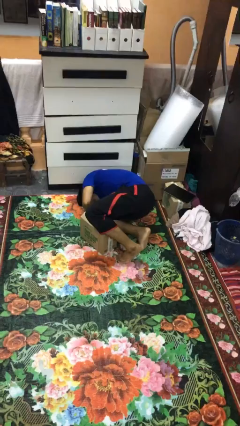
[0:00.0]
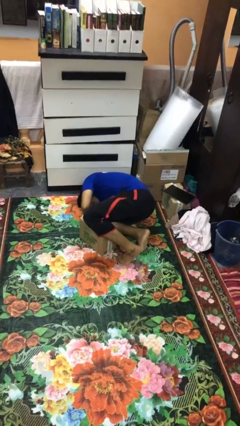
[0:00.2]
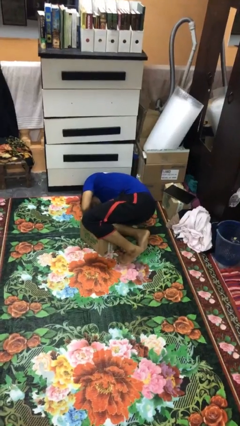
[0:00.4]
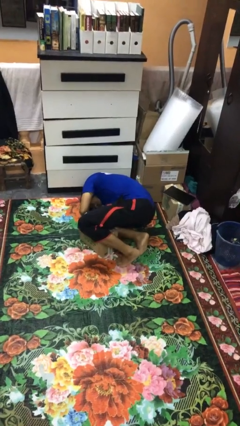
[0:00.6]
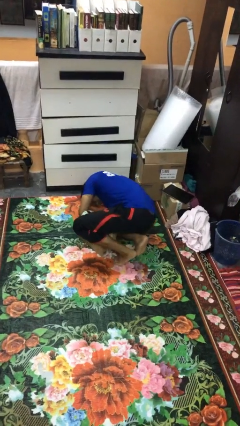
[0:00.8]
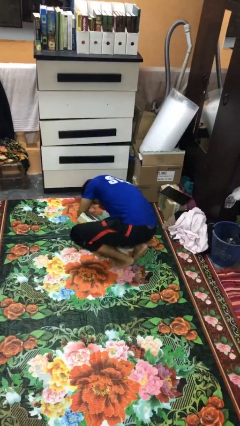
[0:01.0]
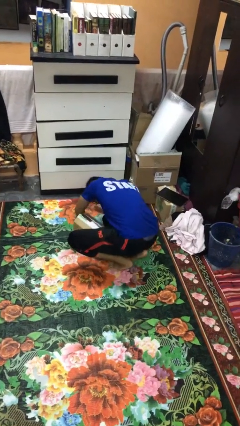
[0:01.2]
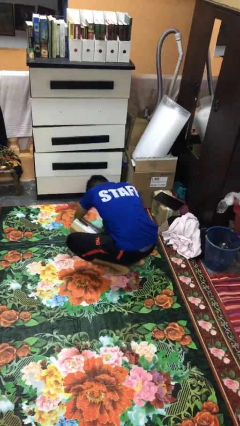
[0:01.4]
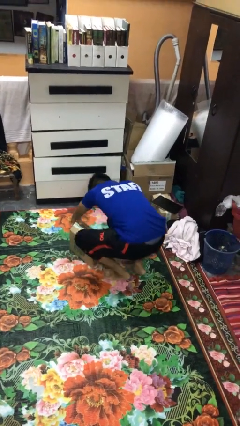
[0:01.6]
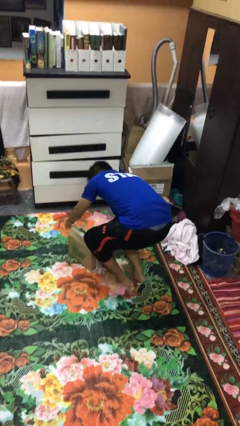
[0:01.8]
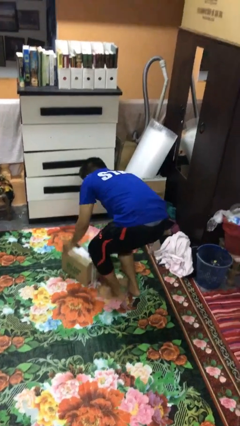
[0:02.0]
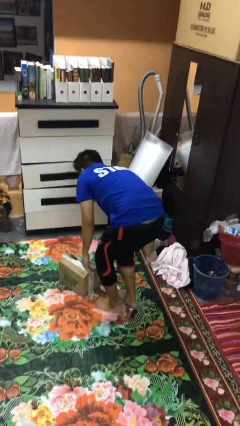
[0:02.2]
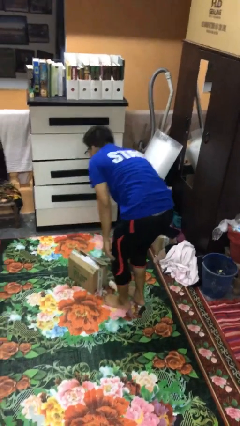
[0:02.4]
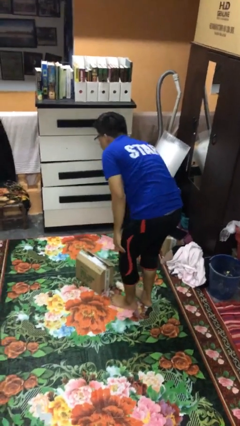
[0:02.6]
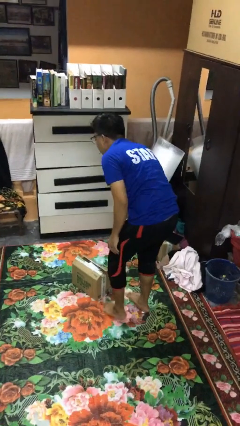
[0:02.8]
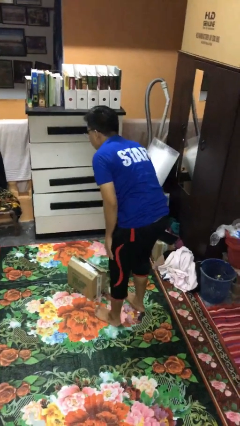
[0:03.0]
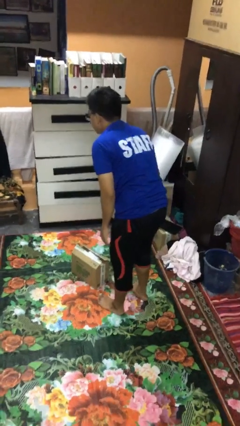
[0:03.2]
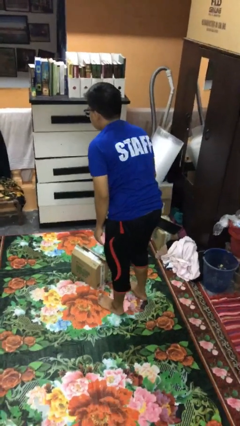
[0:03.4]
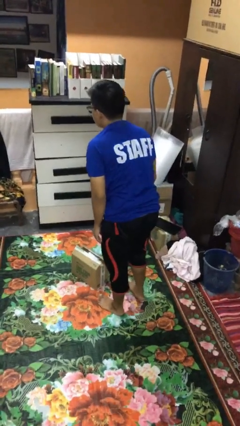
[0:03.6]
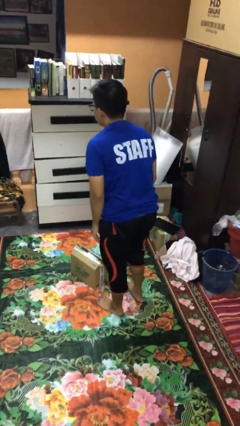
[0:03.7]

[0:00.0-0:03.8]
person stands up from floor

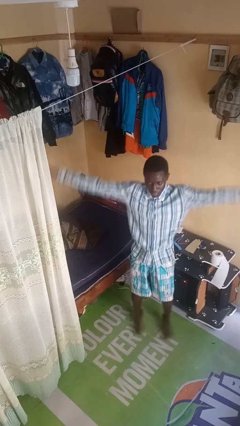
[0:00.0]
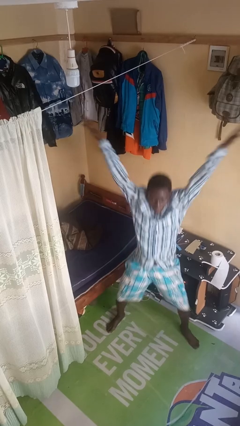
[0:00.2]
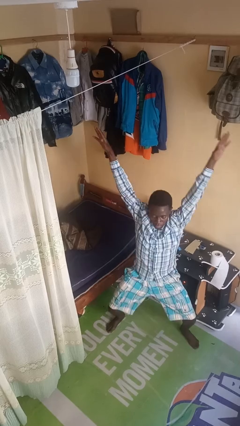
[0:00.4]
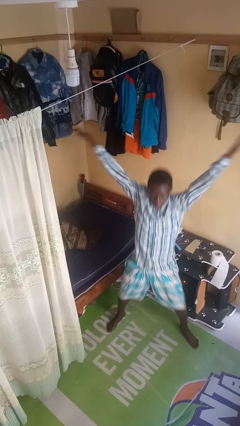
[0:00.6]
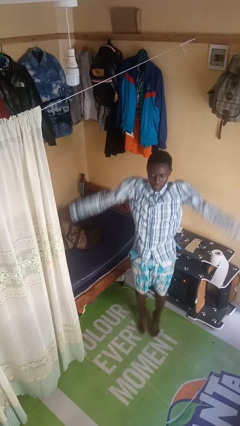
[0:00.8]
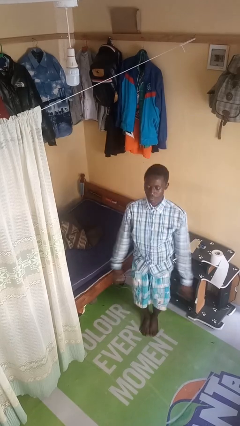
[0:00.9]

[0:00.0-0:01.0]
person exercises with jumping jacks

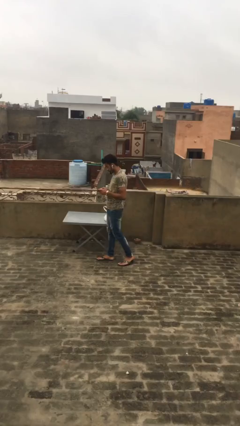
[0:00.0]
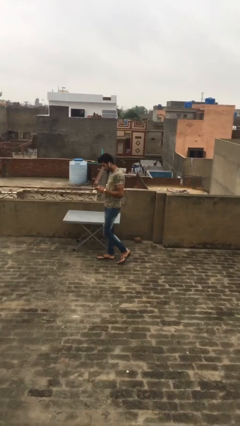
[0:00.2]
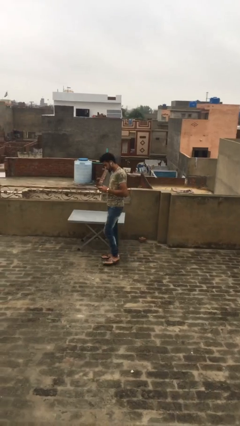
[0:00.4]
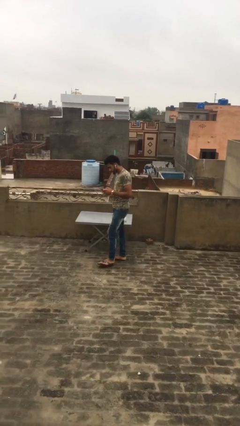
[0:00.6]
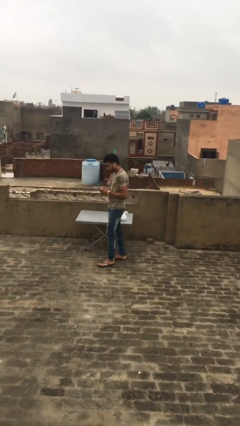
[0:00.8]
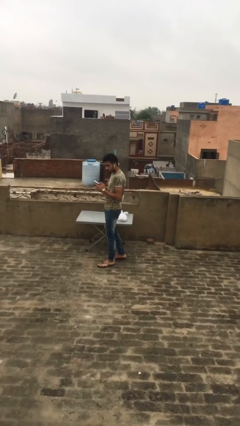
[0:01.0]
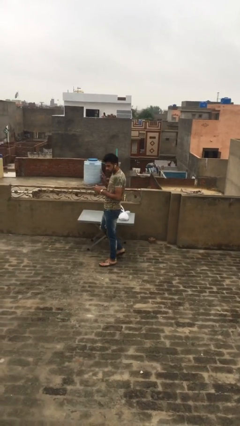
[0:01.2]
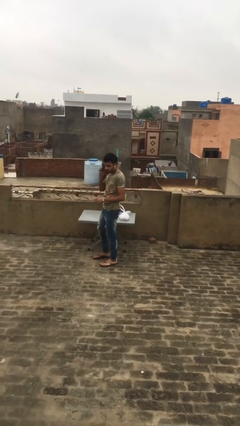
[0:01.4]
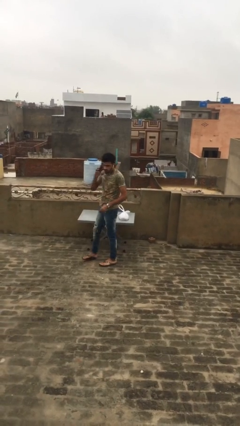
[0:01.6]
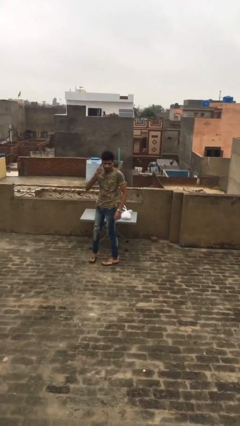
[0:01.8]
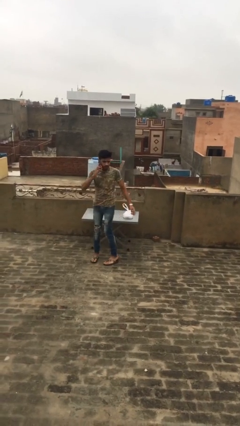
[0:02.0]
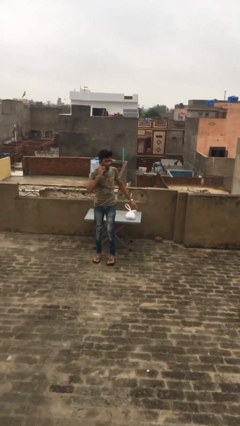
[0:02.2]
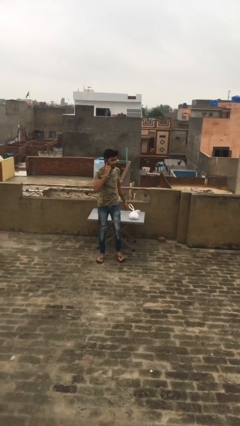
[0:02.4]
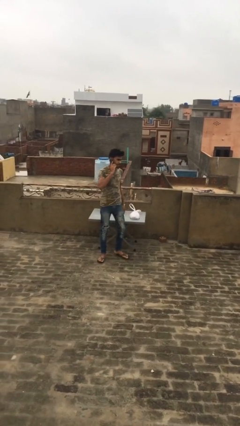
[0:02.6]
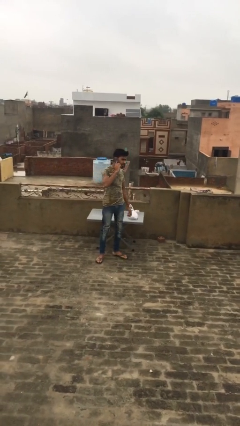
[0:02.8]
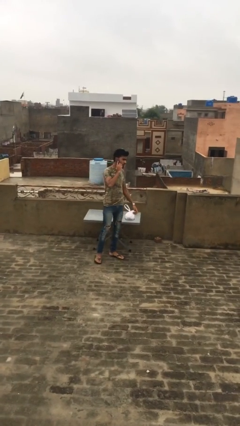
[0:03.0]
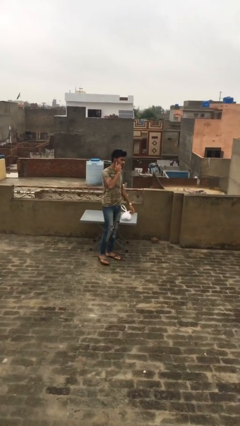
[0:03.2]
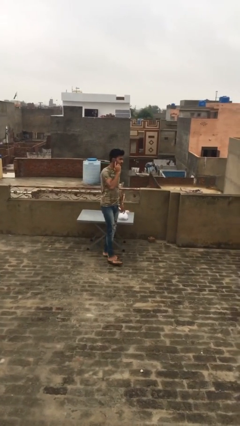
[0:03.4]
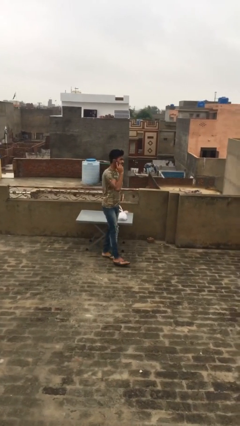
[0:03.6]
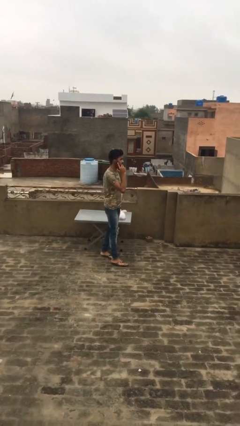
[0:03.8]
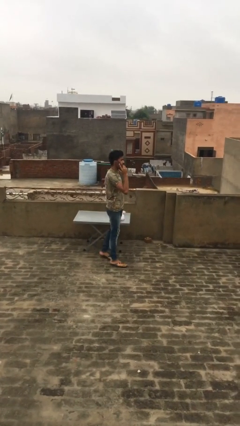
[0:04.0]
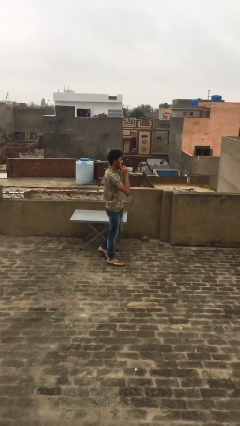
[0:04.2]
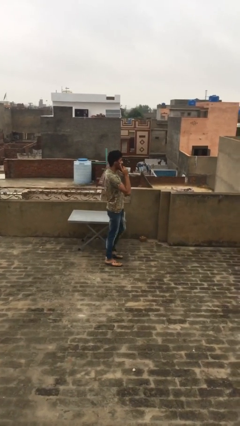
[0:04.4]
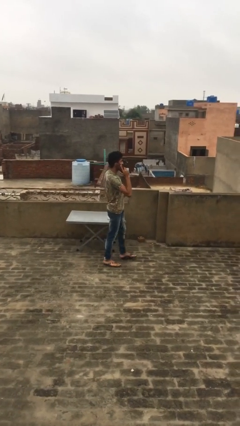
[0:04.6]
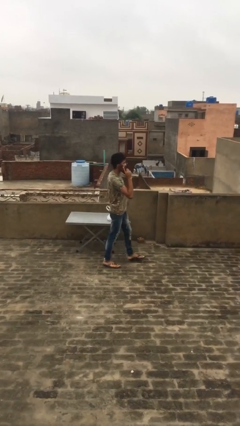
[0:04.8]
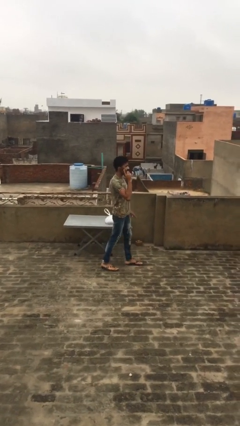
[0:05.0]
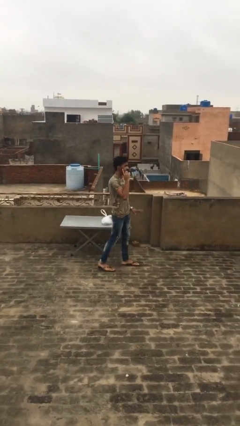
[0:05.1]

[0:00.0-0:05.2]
person talks on phone

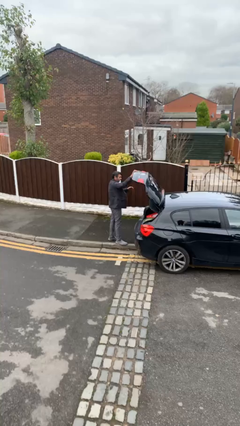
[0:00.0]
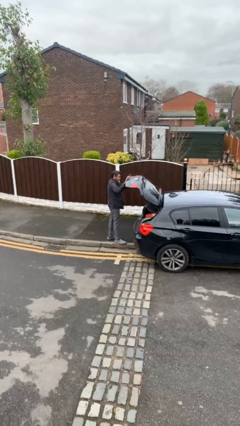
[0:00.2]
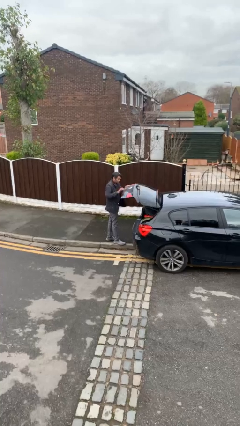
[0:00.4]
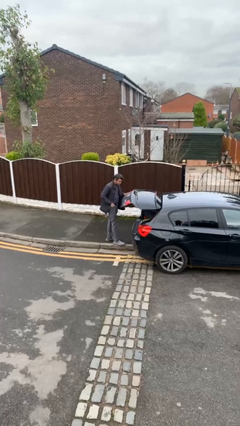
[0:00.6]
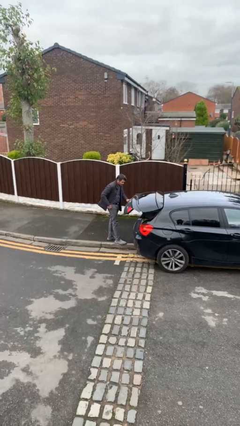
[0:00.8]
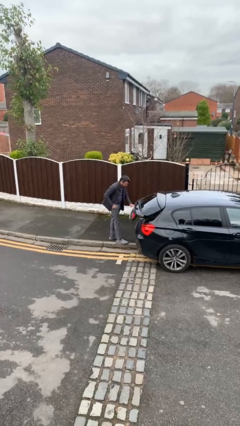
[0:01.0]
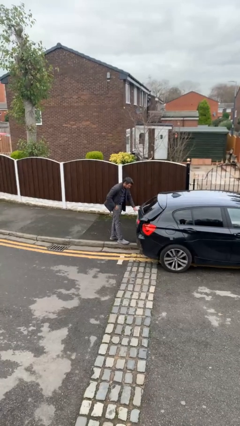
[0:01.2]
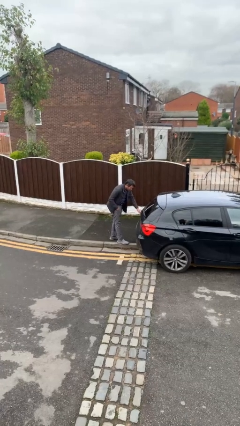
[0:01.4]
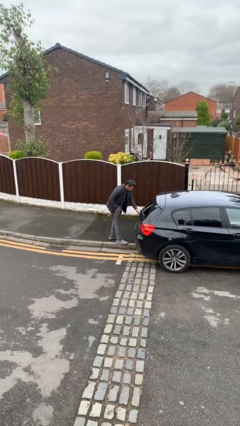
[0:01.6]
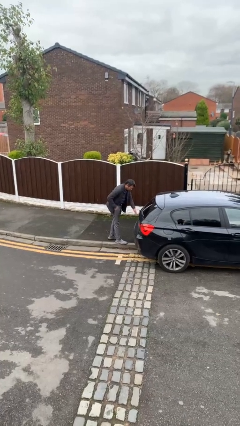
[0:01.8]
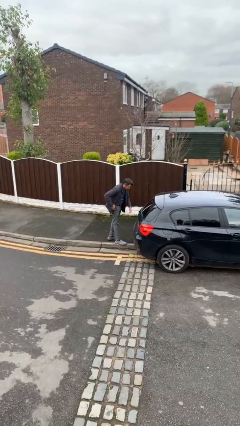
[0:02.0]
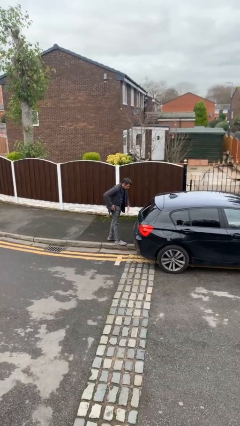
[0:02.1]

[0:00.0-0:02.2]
person closes car trunk

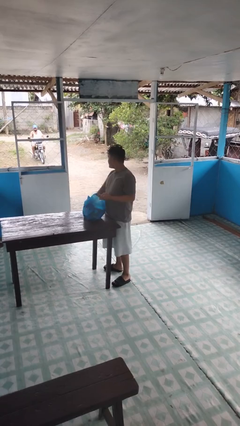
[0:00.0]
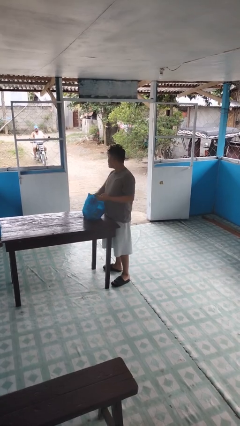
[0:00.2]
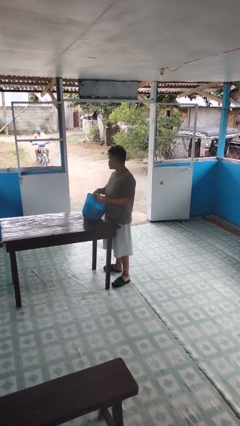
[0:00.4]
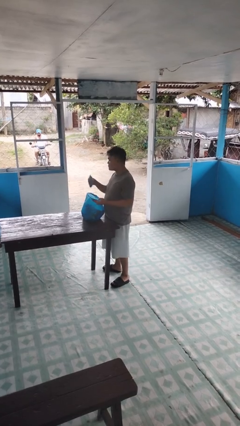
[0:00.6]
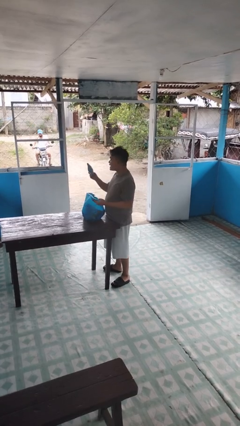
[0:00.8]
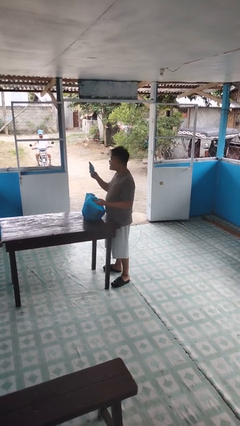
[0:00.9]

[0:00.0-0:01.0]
person takes object from bag

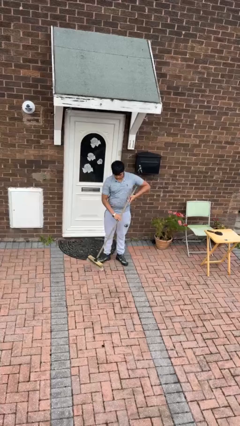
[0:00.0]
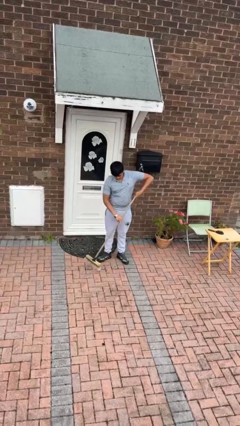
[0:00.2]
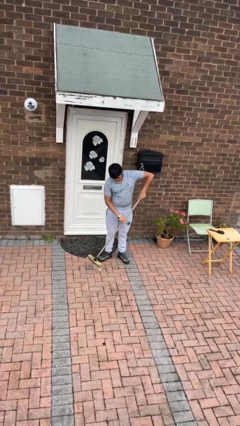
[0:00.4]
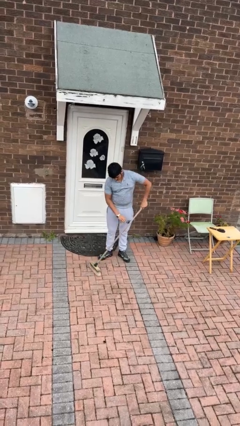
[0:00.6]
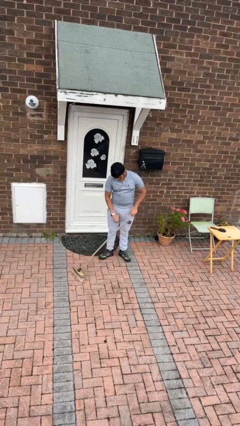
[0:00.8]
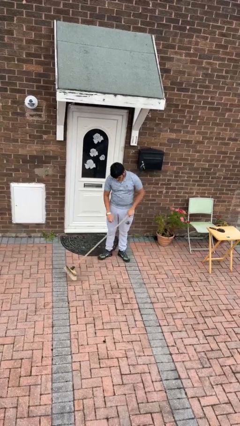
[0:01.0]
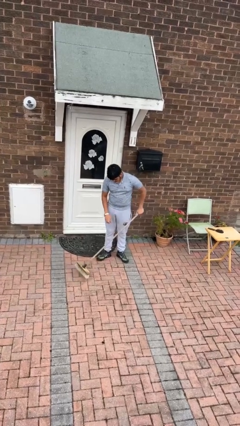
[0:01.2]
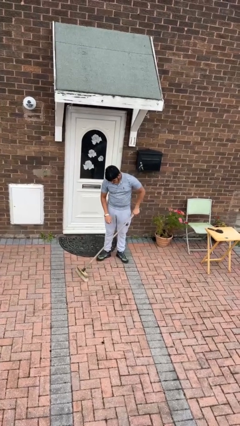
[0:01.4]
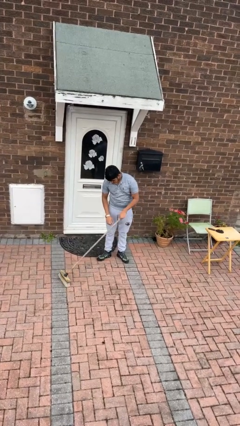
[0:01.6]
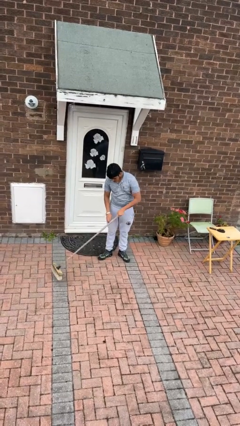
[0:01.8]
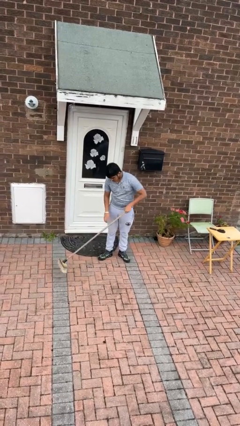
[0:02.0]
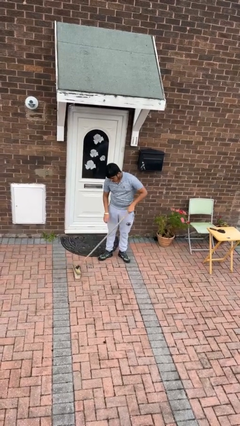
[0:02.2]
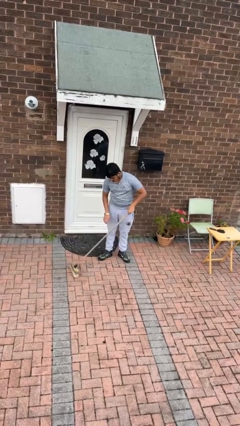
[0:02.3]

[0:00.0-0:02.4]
person sweeps floor

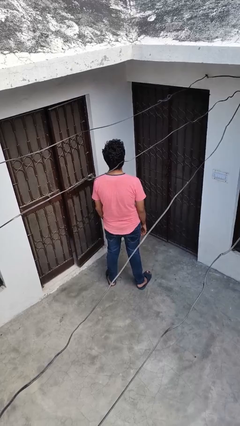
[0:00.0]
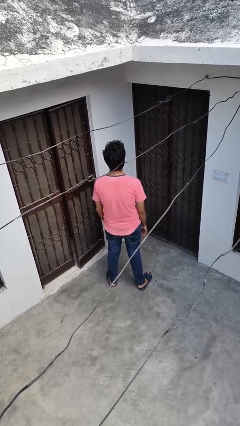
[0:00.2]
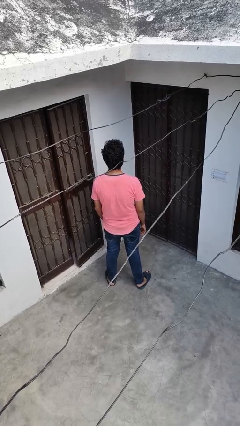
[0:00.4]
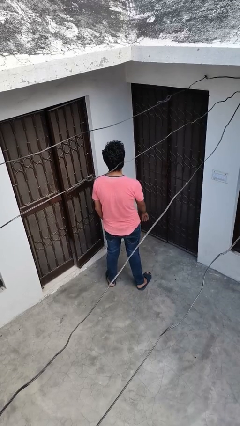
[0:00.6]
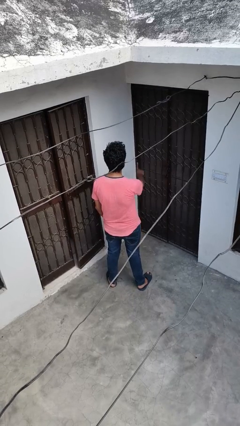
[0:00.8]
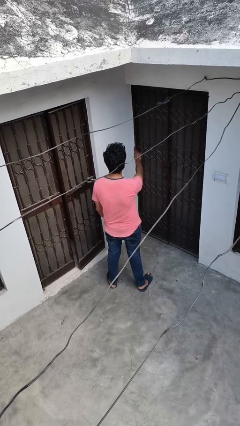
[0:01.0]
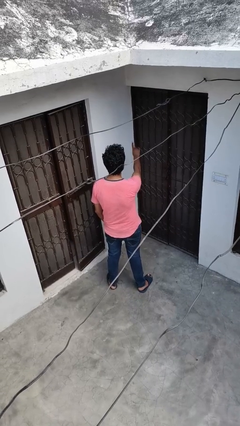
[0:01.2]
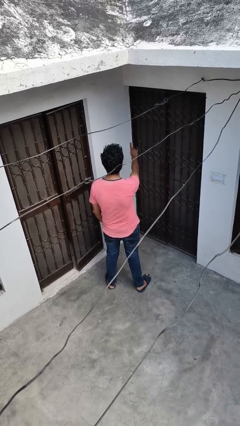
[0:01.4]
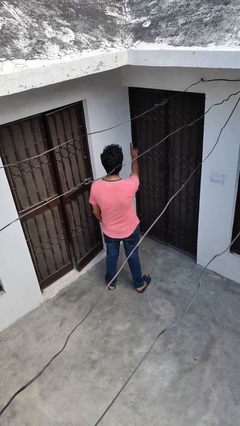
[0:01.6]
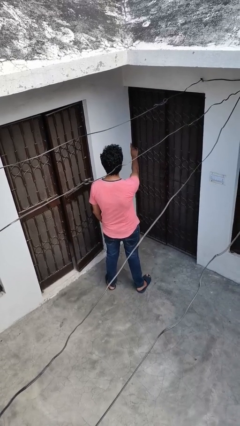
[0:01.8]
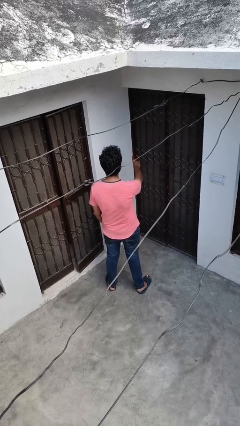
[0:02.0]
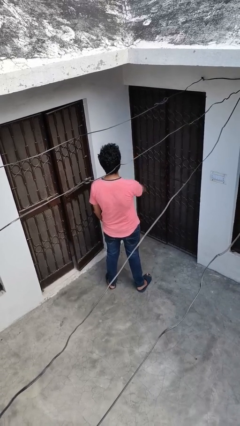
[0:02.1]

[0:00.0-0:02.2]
person gestures number one
